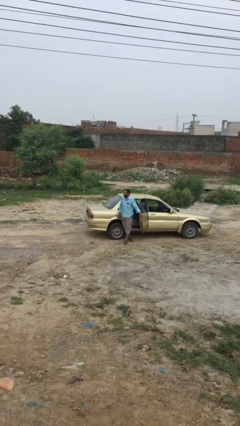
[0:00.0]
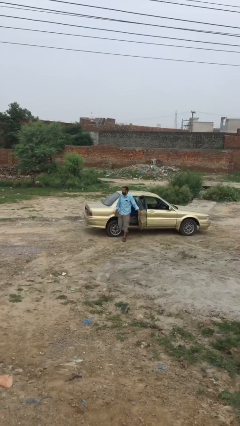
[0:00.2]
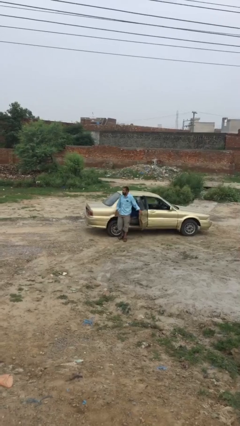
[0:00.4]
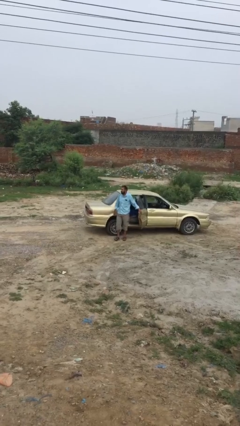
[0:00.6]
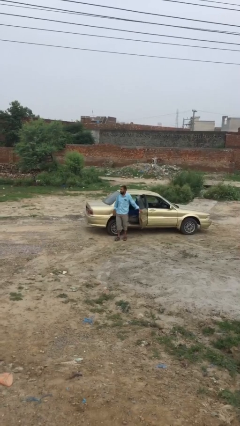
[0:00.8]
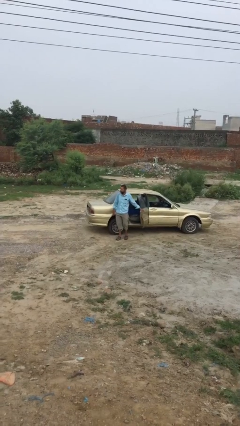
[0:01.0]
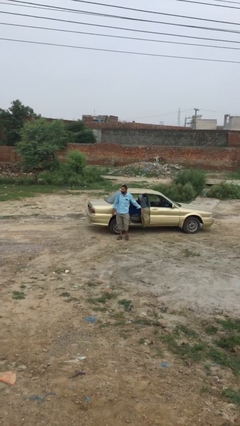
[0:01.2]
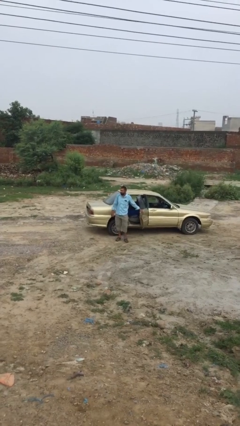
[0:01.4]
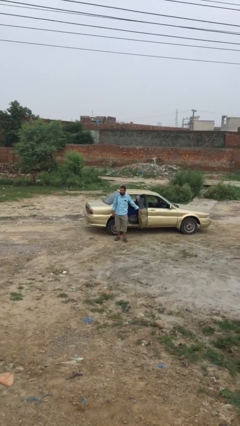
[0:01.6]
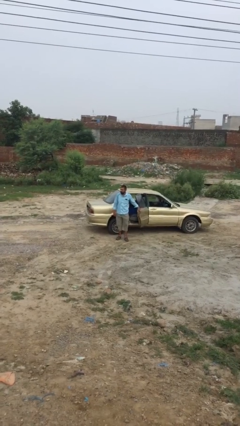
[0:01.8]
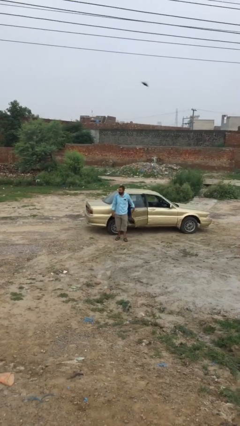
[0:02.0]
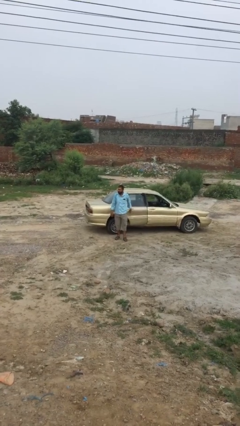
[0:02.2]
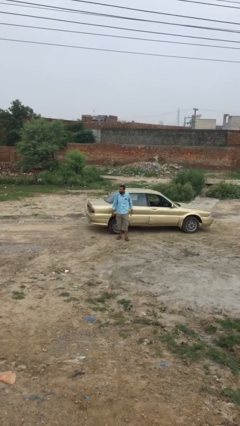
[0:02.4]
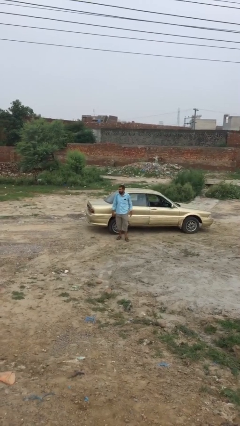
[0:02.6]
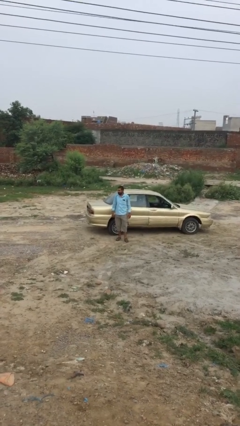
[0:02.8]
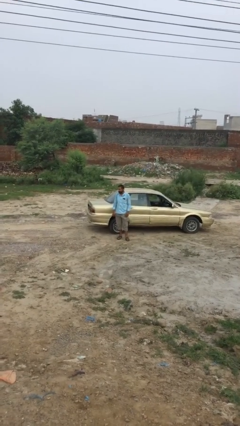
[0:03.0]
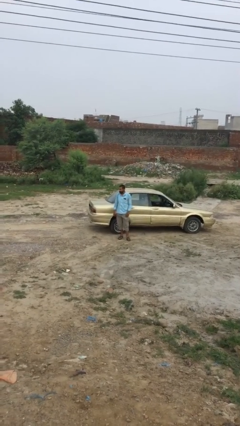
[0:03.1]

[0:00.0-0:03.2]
person closes car door

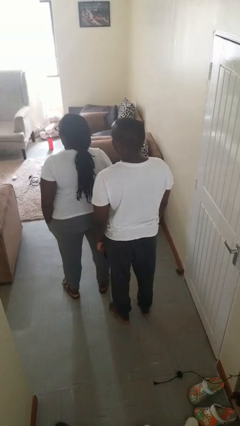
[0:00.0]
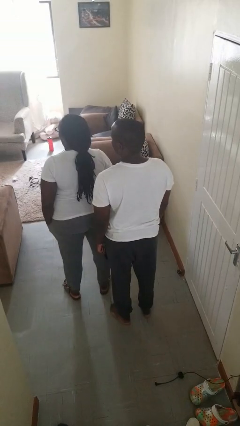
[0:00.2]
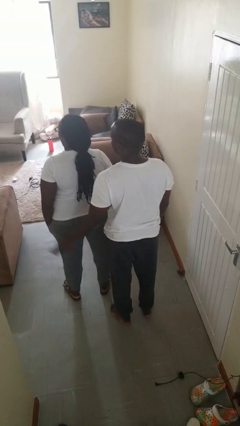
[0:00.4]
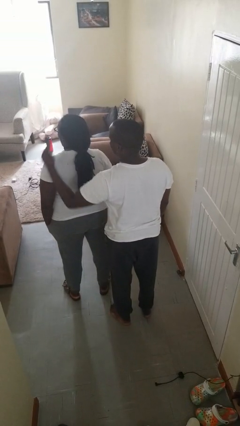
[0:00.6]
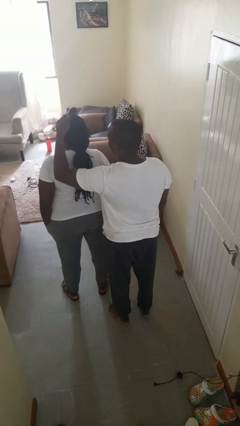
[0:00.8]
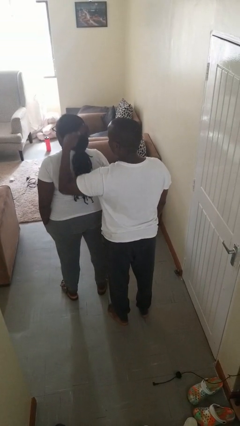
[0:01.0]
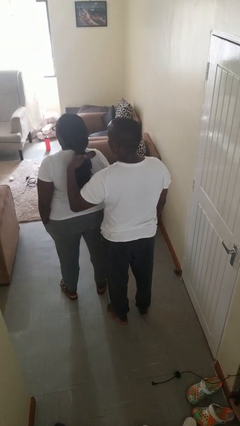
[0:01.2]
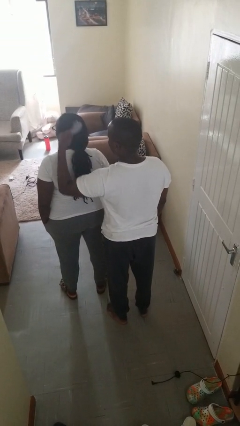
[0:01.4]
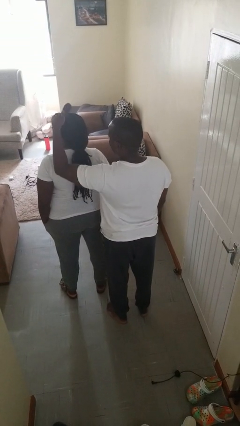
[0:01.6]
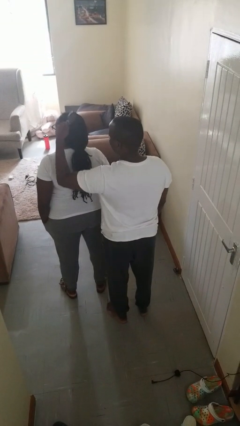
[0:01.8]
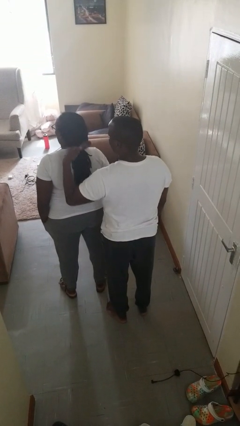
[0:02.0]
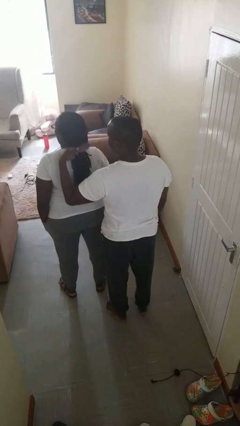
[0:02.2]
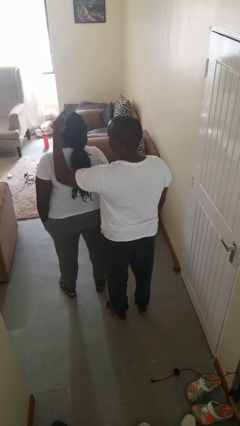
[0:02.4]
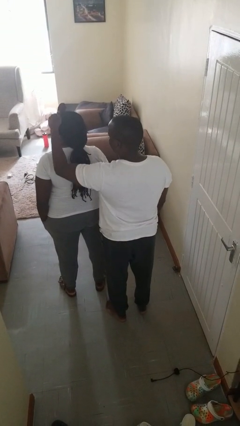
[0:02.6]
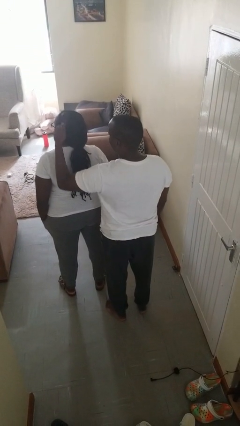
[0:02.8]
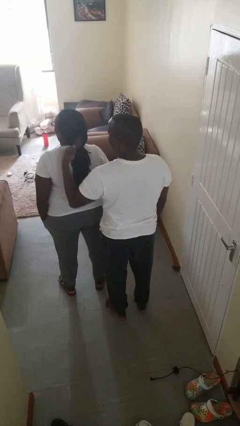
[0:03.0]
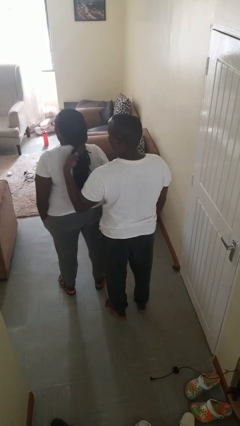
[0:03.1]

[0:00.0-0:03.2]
person brushes hair of person

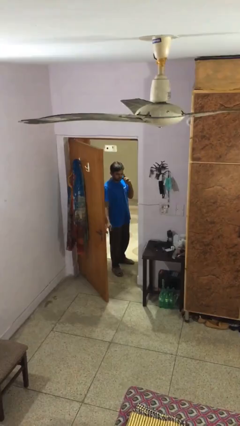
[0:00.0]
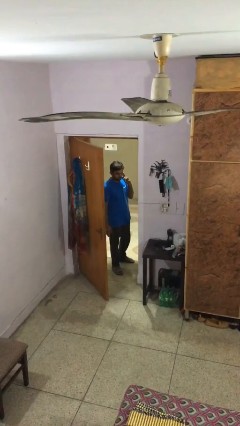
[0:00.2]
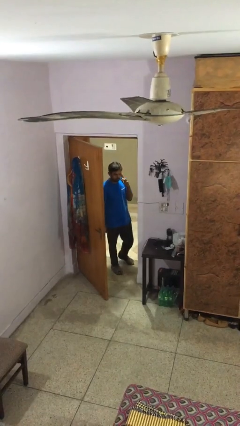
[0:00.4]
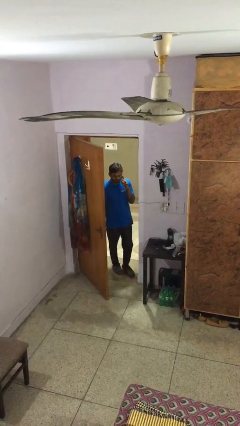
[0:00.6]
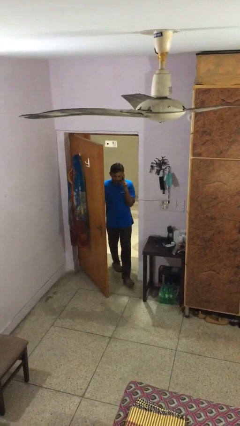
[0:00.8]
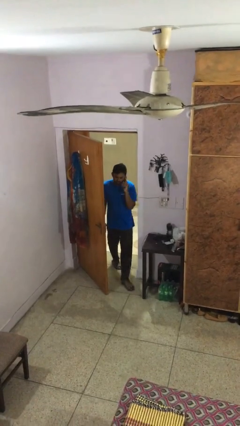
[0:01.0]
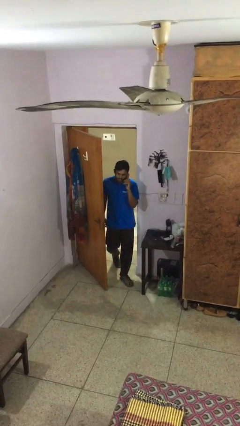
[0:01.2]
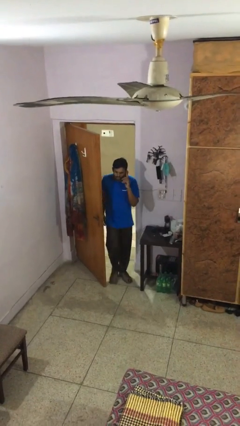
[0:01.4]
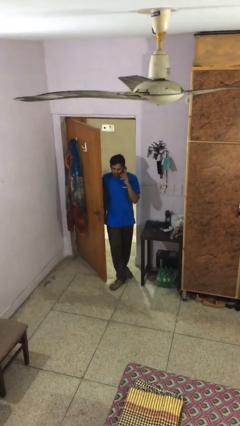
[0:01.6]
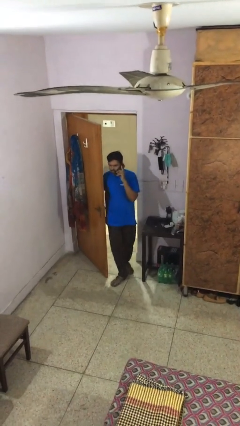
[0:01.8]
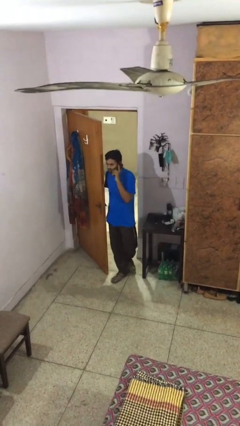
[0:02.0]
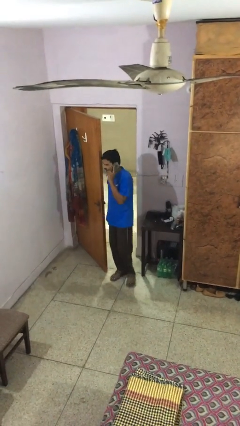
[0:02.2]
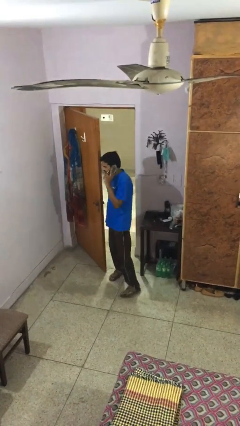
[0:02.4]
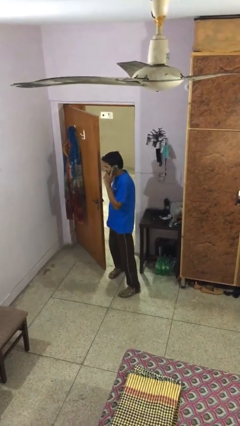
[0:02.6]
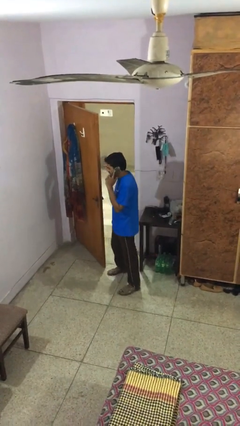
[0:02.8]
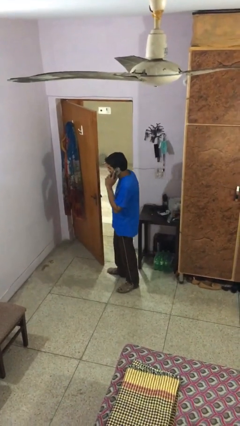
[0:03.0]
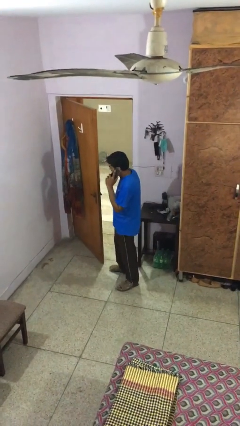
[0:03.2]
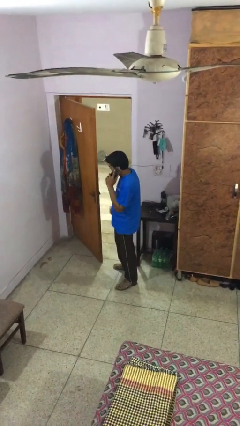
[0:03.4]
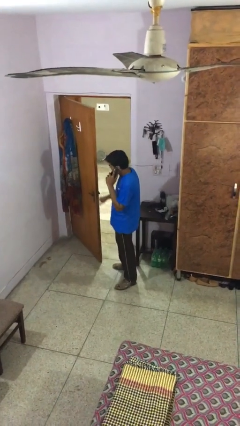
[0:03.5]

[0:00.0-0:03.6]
person enters scene through structure

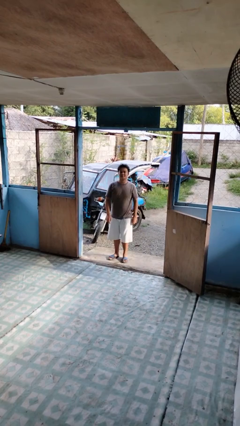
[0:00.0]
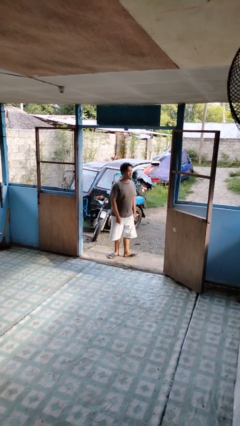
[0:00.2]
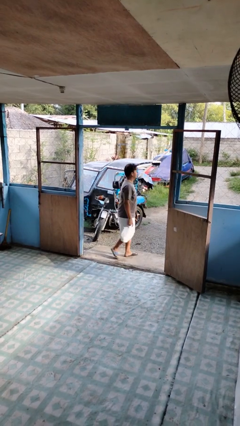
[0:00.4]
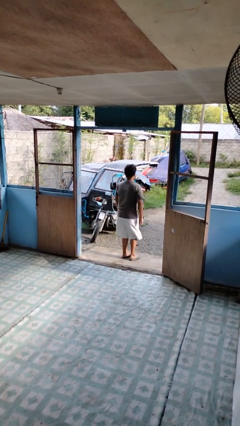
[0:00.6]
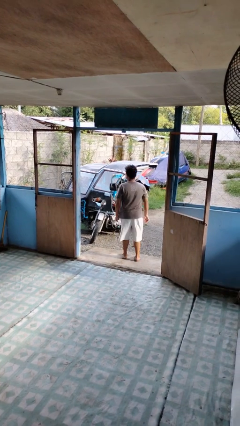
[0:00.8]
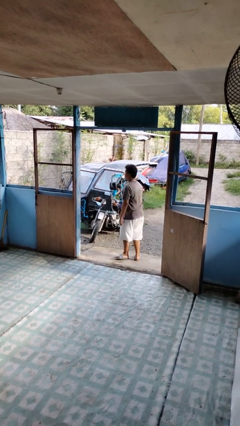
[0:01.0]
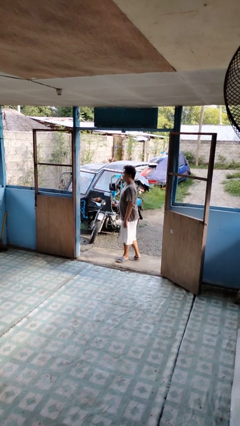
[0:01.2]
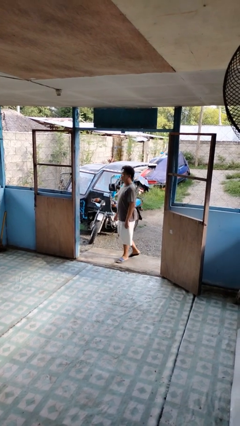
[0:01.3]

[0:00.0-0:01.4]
person twirls

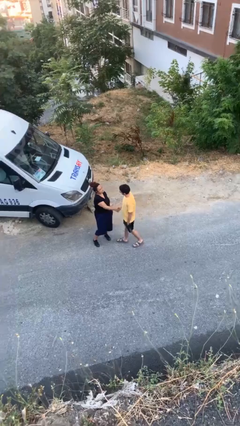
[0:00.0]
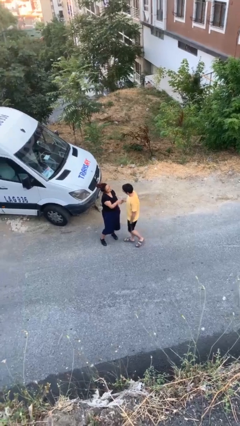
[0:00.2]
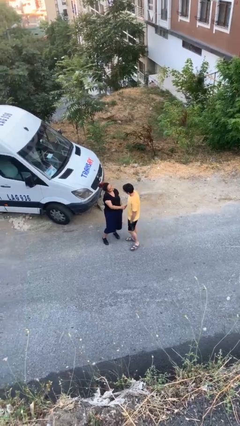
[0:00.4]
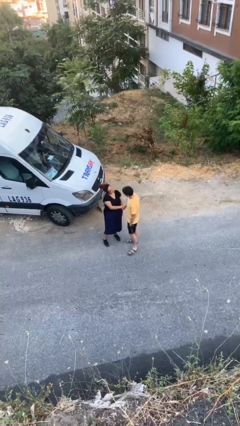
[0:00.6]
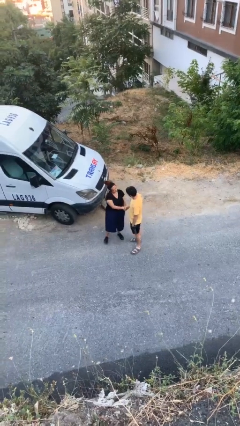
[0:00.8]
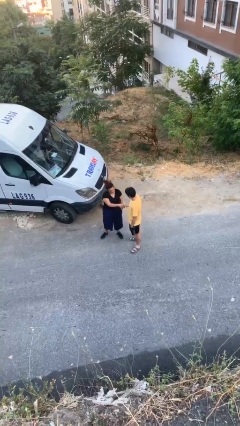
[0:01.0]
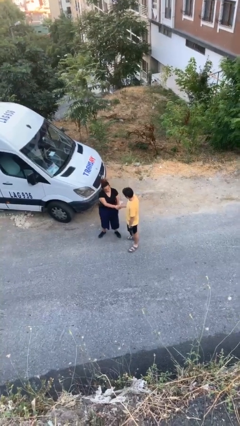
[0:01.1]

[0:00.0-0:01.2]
person shakes hand

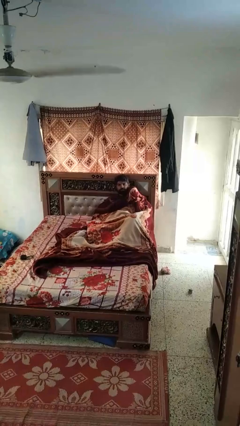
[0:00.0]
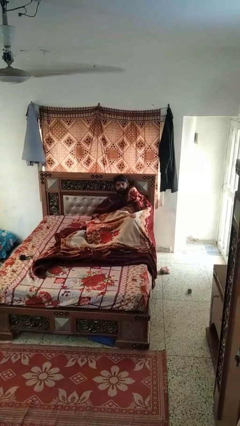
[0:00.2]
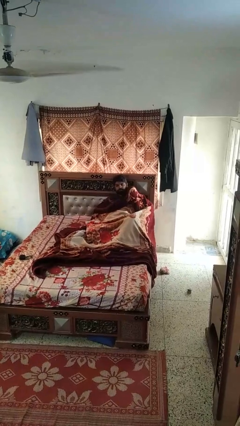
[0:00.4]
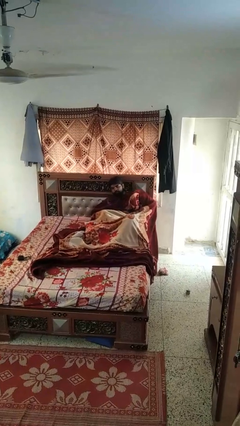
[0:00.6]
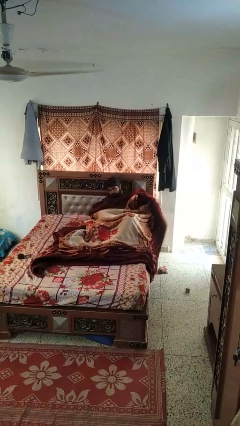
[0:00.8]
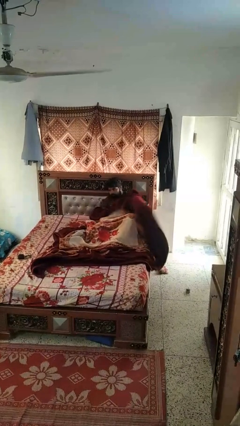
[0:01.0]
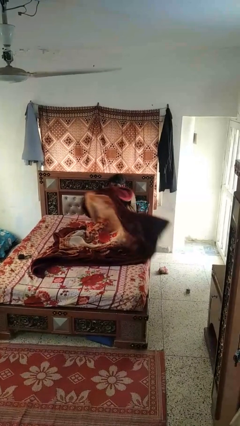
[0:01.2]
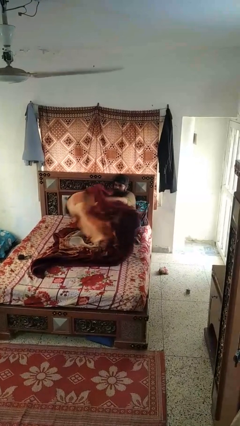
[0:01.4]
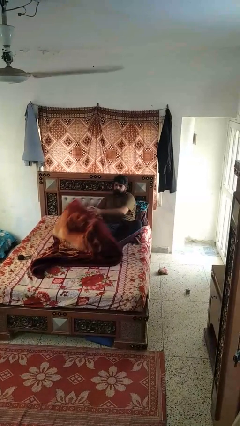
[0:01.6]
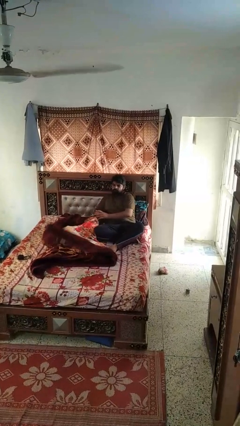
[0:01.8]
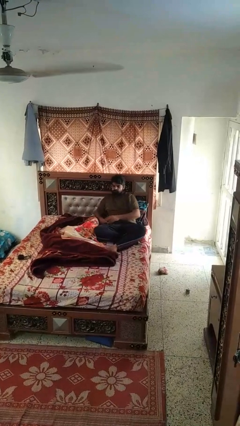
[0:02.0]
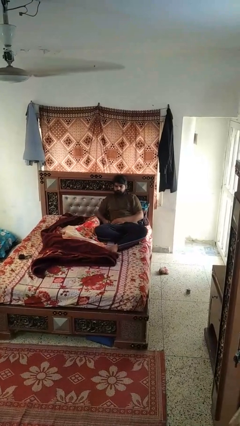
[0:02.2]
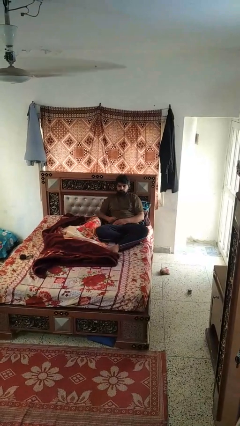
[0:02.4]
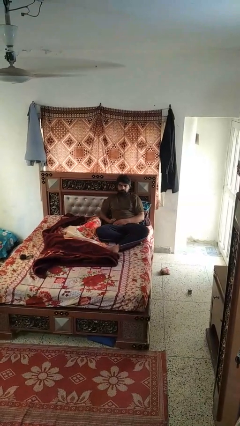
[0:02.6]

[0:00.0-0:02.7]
person uncovers with blanket

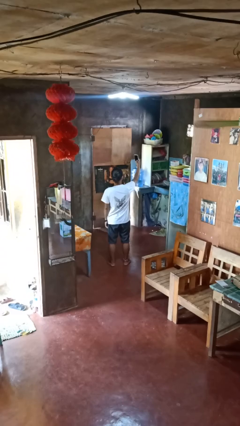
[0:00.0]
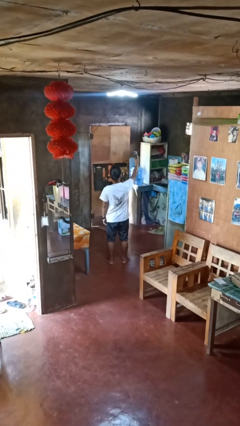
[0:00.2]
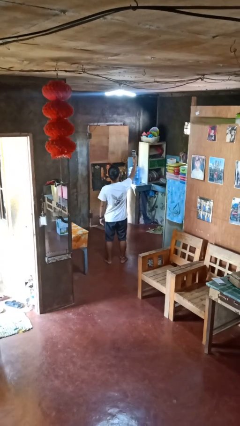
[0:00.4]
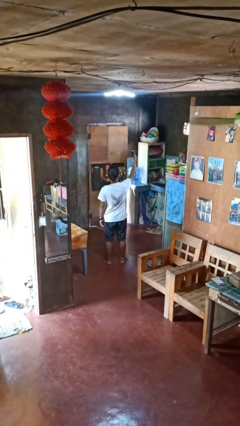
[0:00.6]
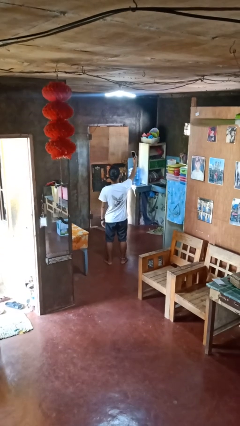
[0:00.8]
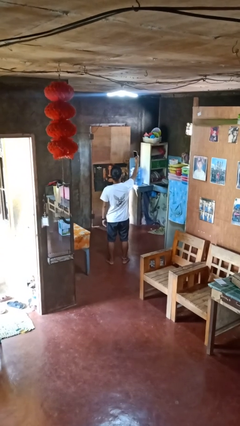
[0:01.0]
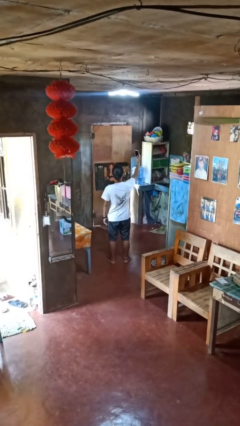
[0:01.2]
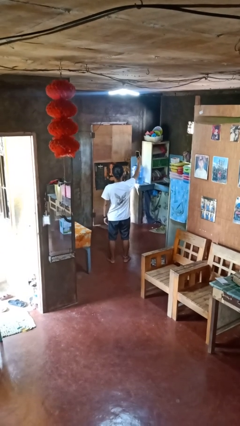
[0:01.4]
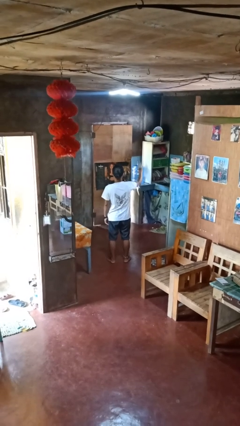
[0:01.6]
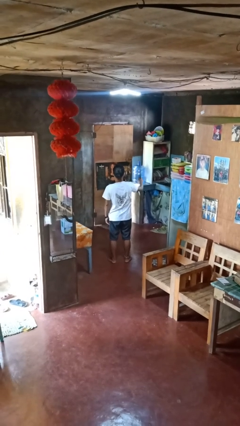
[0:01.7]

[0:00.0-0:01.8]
person takes selfie
